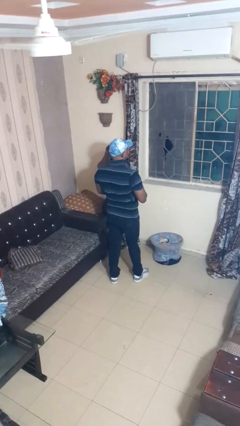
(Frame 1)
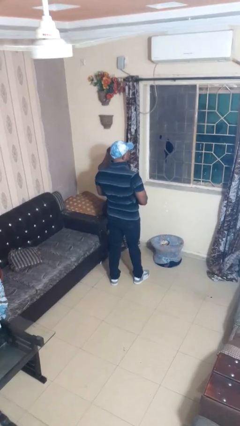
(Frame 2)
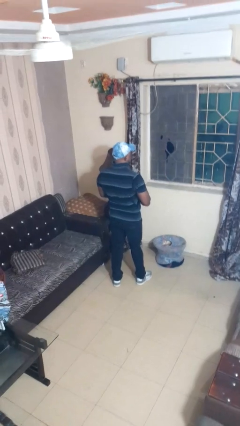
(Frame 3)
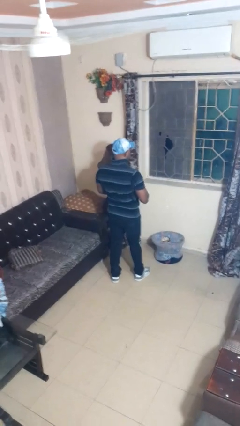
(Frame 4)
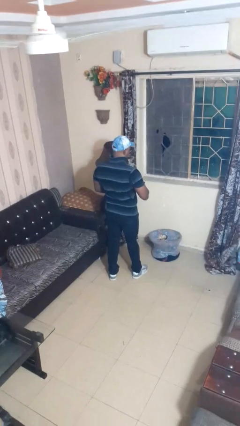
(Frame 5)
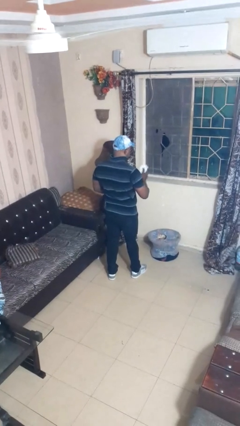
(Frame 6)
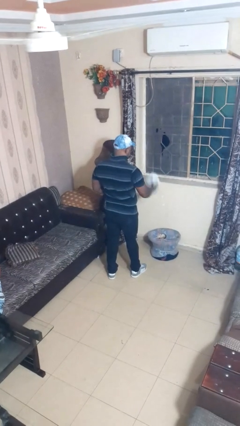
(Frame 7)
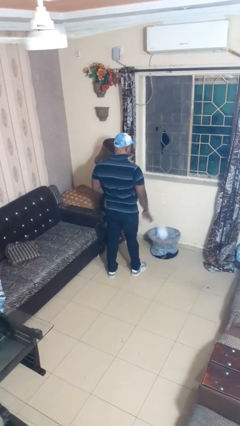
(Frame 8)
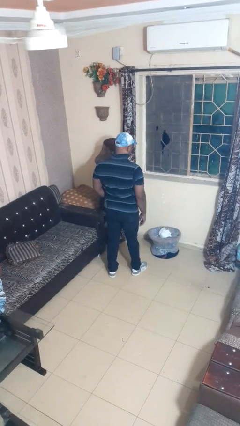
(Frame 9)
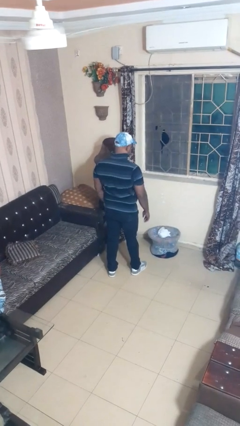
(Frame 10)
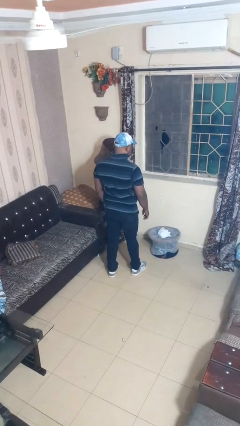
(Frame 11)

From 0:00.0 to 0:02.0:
person puts object into basket

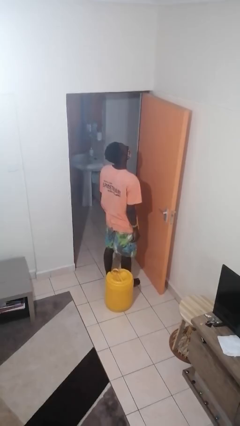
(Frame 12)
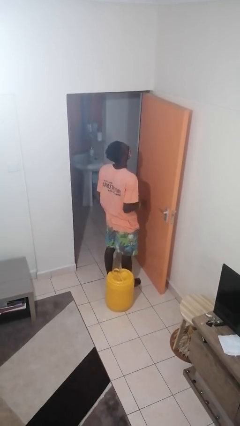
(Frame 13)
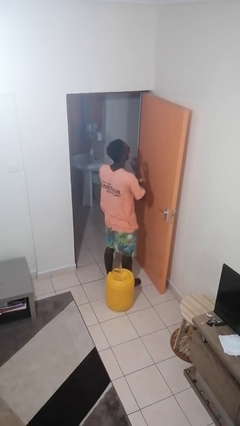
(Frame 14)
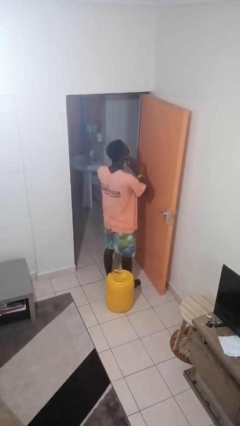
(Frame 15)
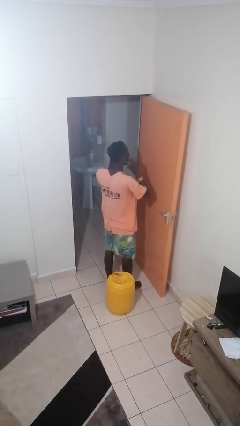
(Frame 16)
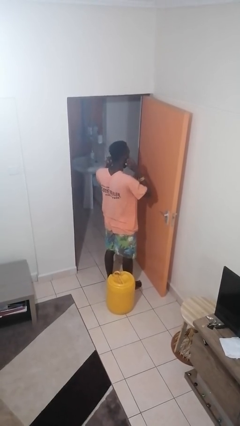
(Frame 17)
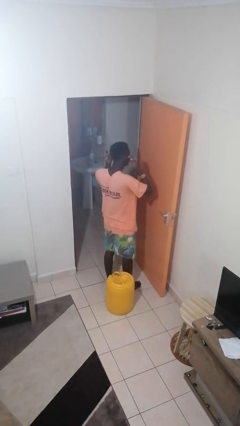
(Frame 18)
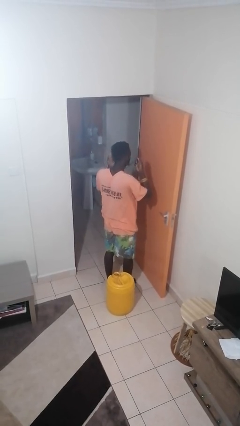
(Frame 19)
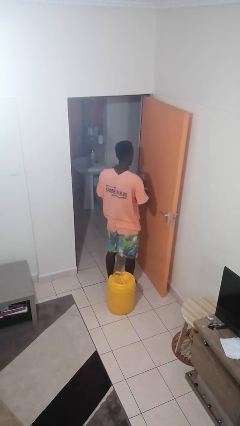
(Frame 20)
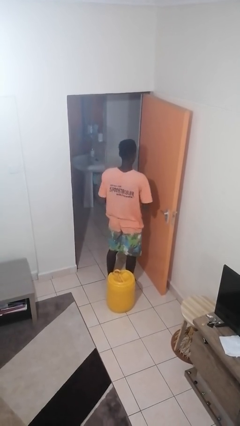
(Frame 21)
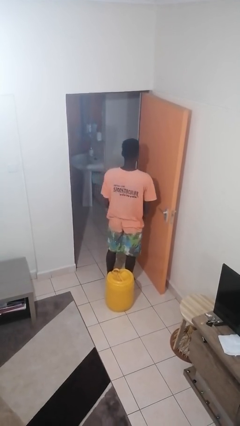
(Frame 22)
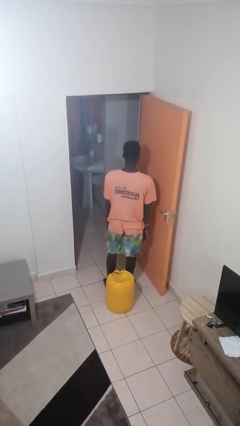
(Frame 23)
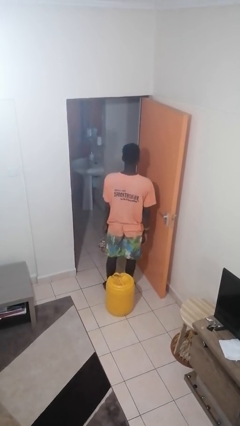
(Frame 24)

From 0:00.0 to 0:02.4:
person takes off facemask

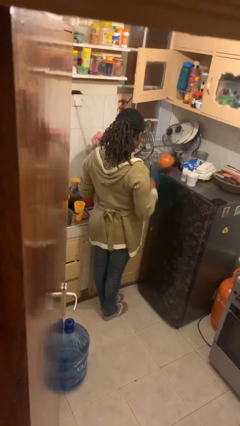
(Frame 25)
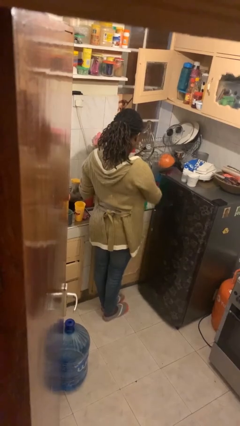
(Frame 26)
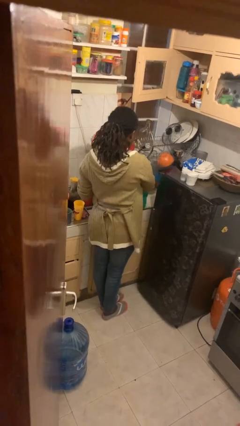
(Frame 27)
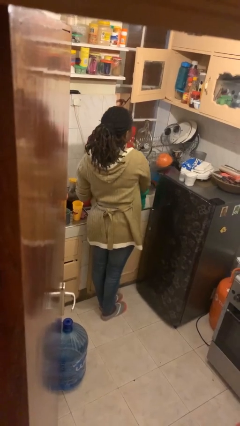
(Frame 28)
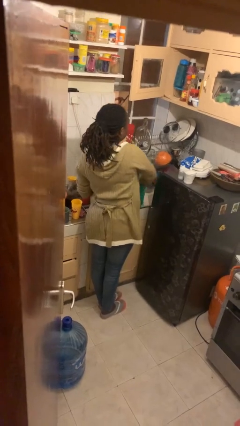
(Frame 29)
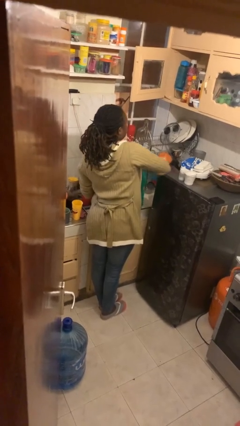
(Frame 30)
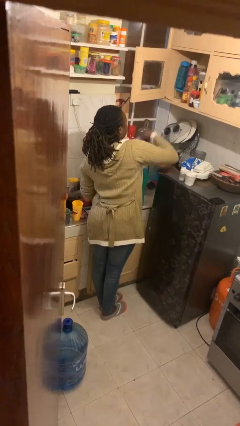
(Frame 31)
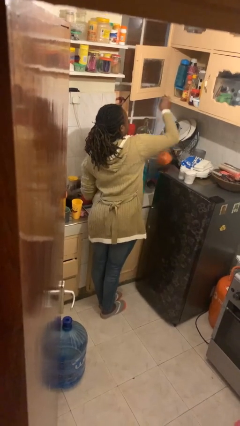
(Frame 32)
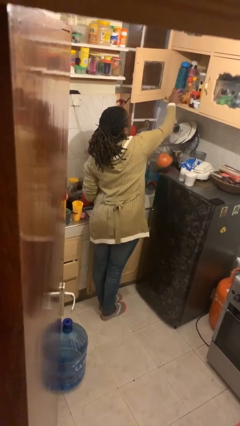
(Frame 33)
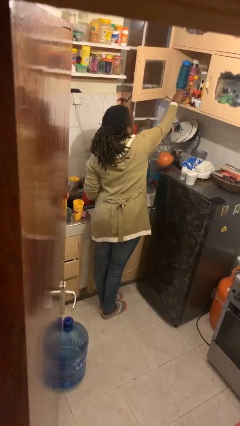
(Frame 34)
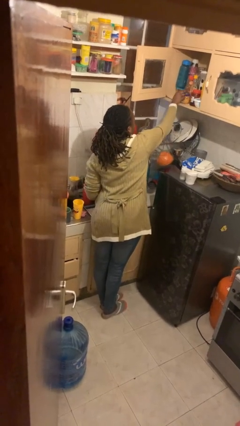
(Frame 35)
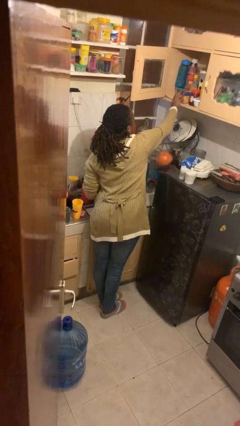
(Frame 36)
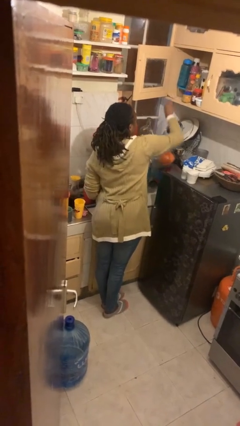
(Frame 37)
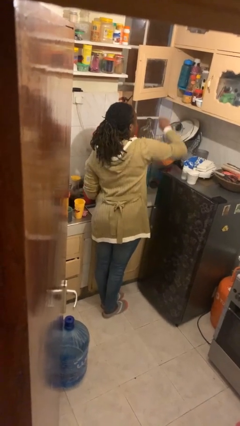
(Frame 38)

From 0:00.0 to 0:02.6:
person loads groceries into cabinet

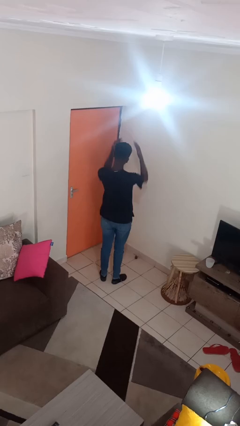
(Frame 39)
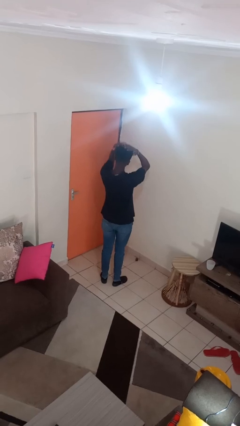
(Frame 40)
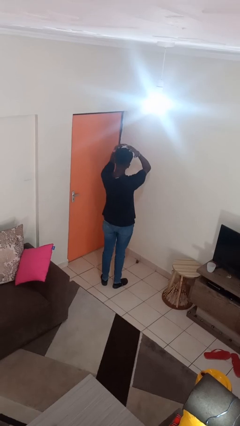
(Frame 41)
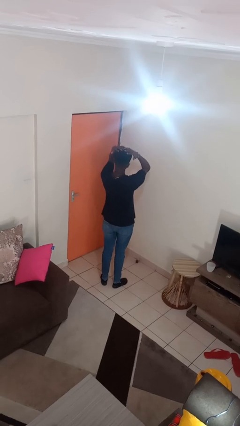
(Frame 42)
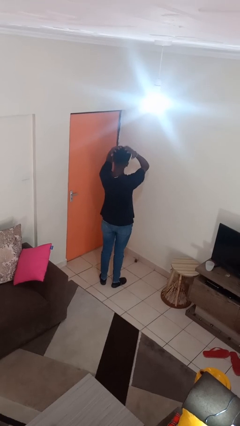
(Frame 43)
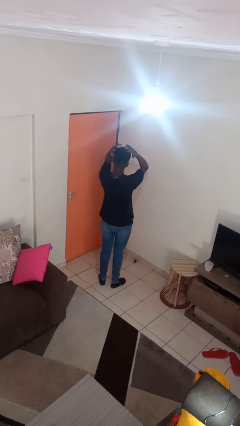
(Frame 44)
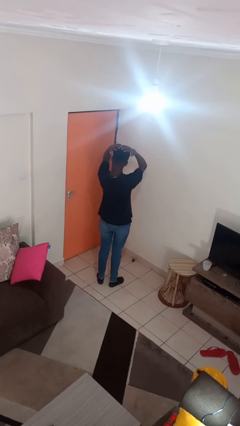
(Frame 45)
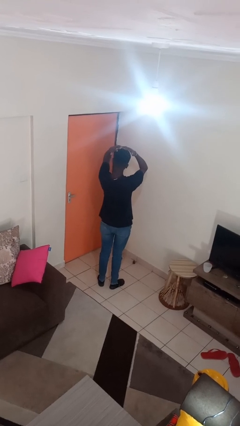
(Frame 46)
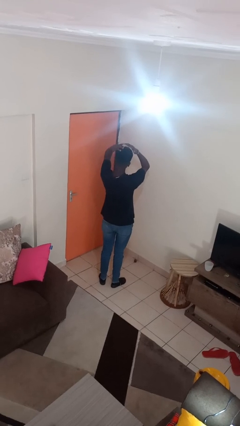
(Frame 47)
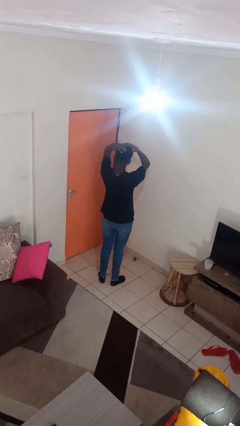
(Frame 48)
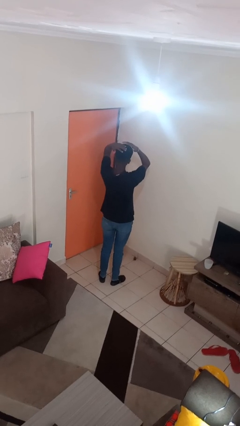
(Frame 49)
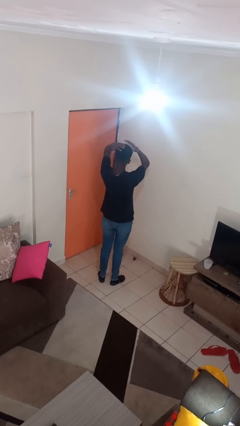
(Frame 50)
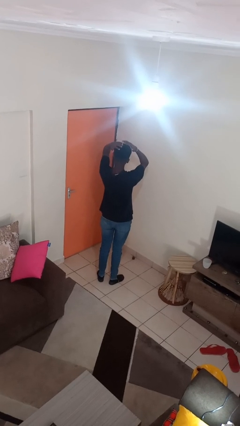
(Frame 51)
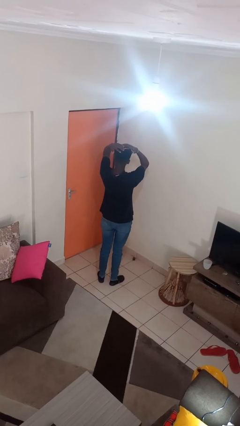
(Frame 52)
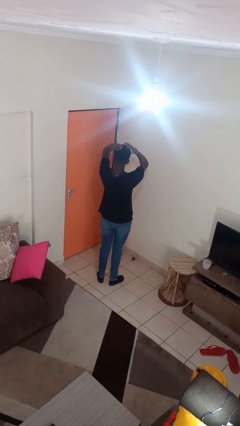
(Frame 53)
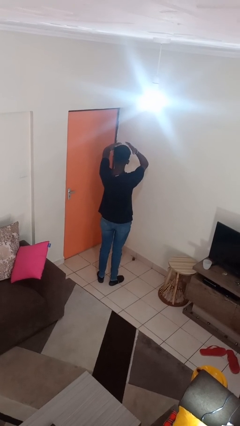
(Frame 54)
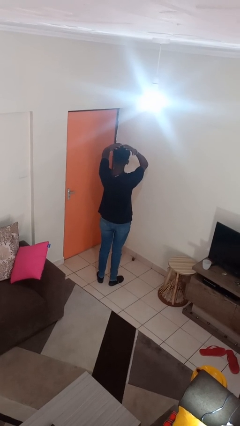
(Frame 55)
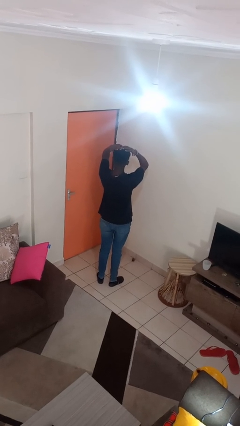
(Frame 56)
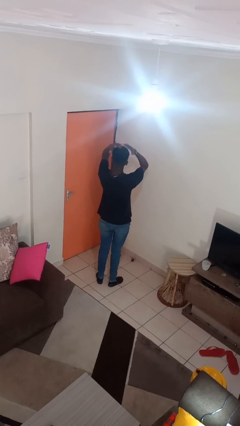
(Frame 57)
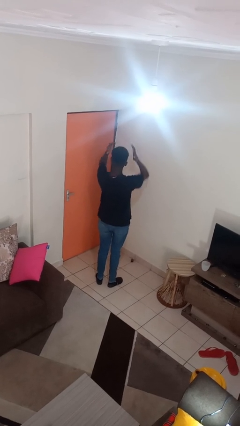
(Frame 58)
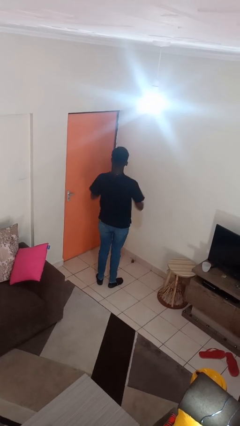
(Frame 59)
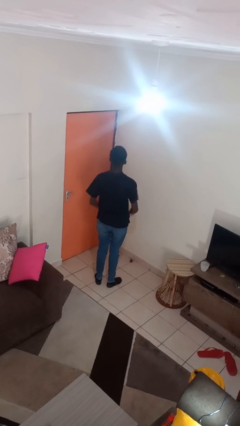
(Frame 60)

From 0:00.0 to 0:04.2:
person pats head

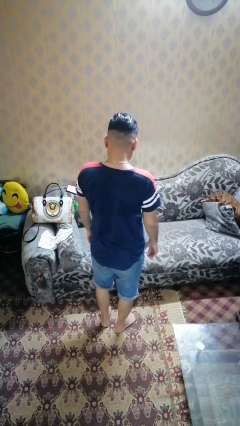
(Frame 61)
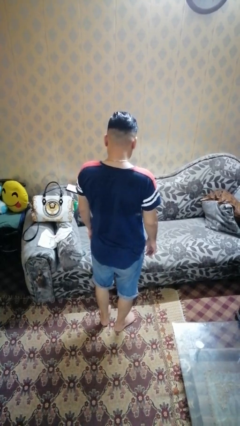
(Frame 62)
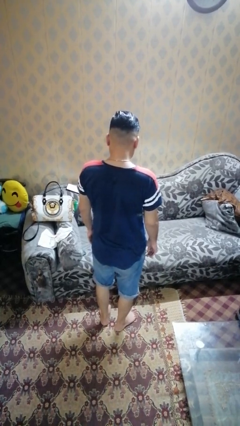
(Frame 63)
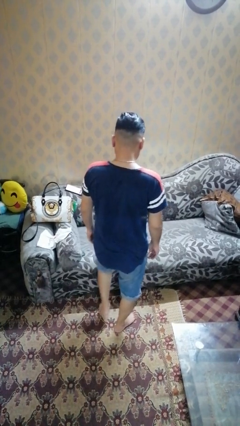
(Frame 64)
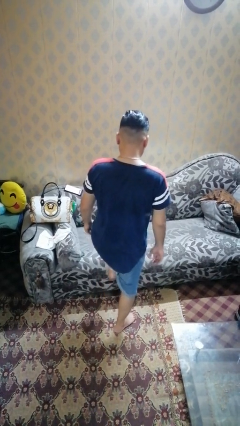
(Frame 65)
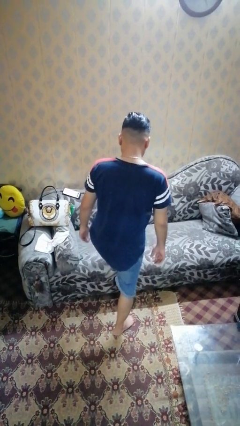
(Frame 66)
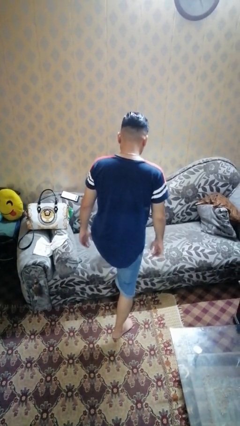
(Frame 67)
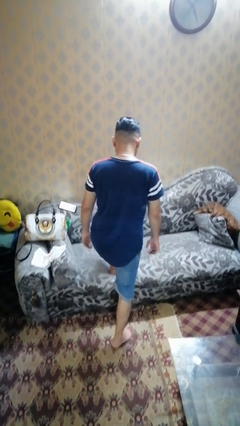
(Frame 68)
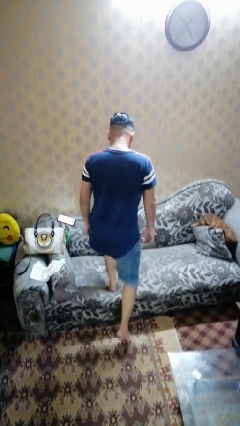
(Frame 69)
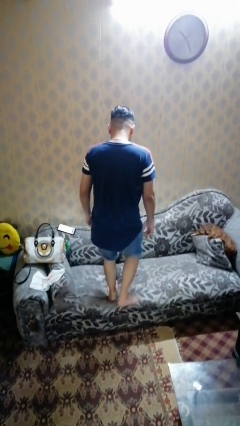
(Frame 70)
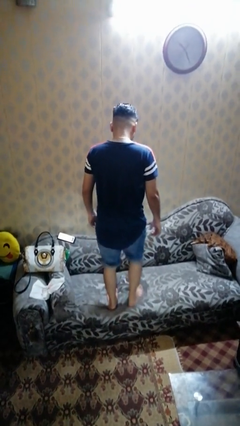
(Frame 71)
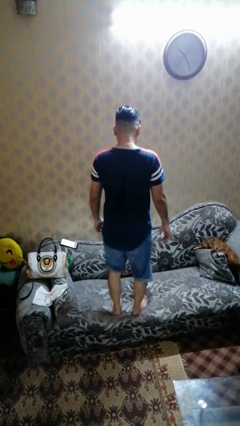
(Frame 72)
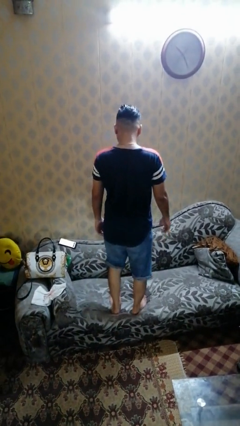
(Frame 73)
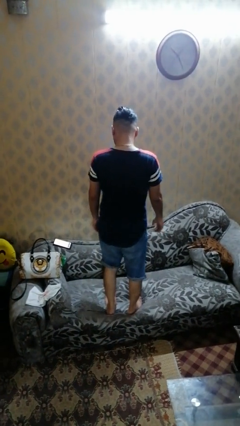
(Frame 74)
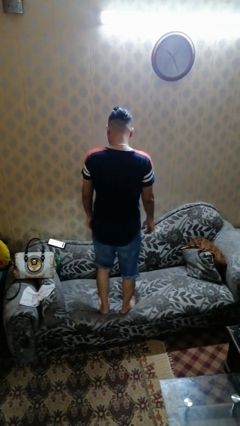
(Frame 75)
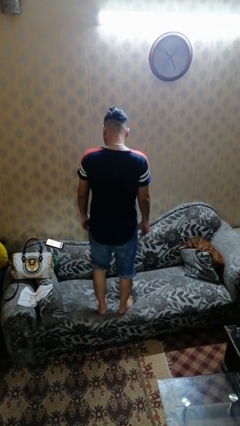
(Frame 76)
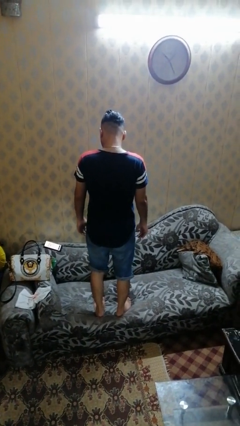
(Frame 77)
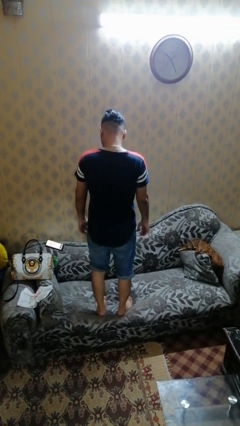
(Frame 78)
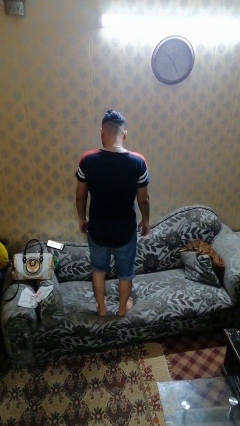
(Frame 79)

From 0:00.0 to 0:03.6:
person climbs on couch

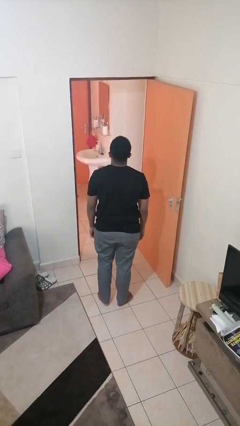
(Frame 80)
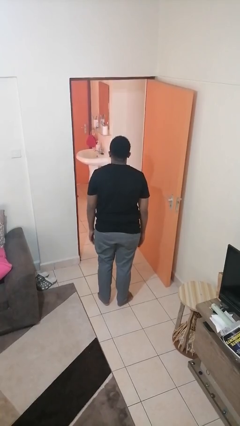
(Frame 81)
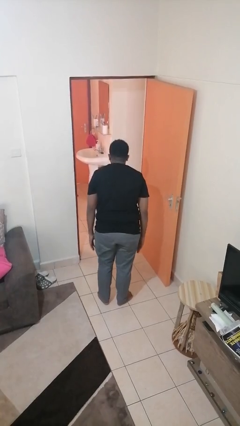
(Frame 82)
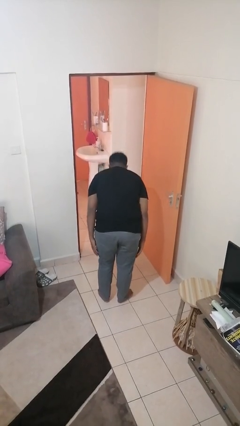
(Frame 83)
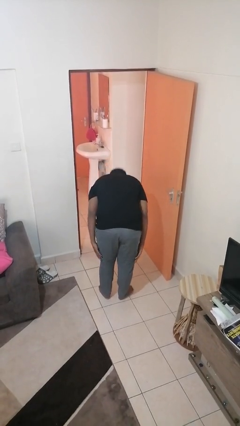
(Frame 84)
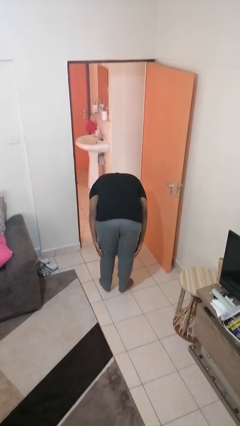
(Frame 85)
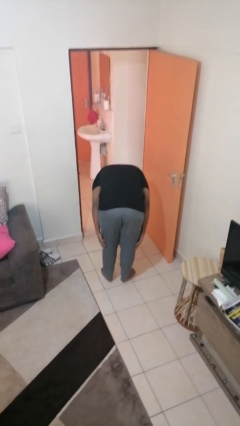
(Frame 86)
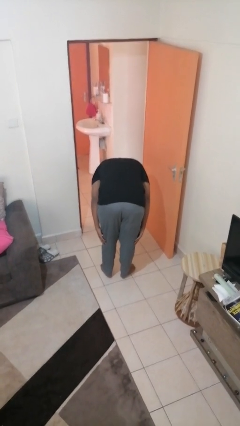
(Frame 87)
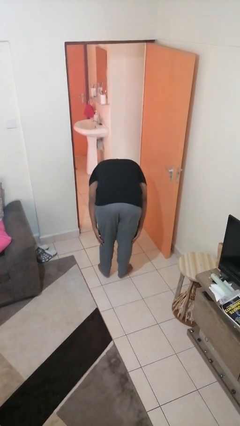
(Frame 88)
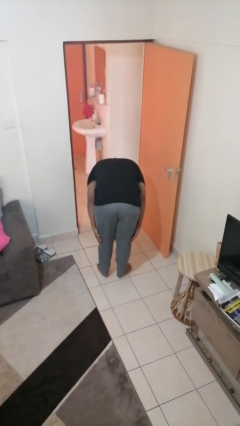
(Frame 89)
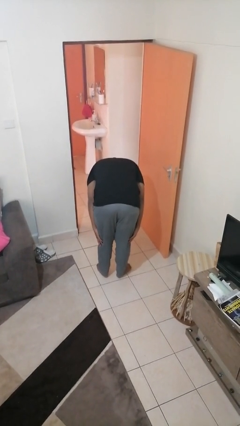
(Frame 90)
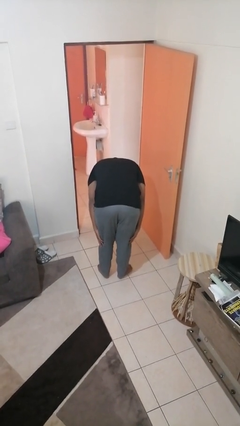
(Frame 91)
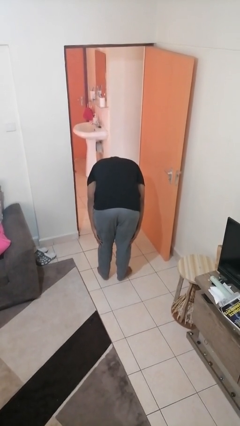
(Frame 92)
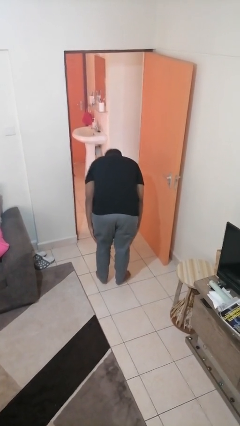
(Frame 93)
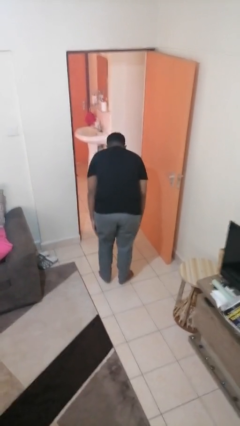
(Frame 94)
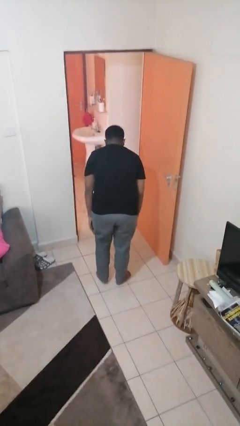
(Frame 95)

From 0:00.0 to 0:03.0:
person bows
